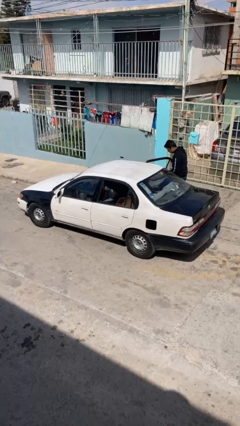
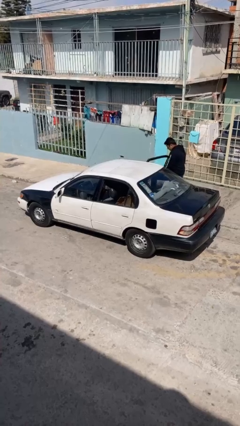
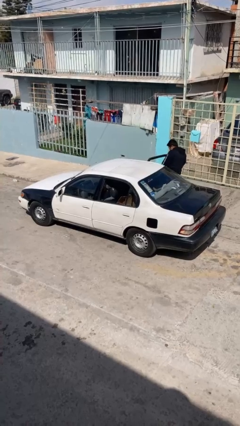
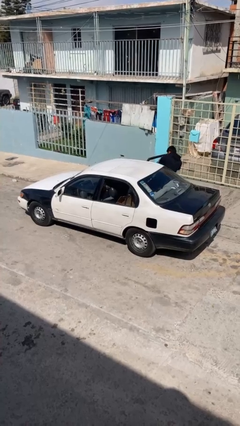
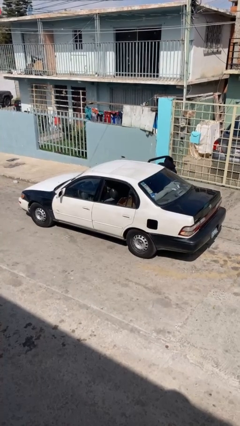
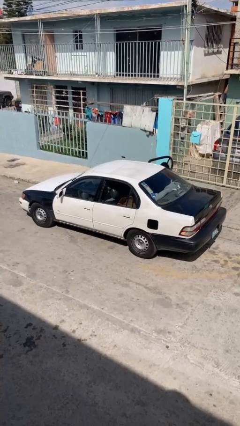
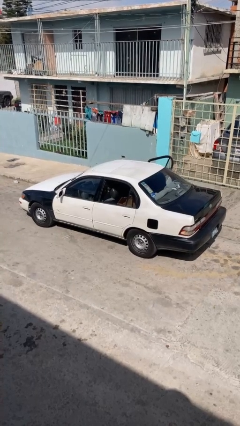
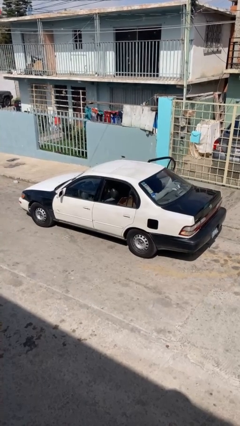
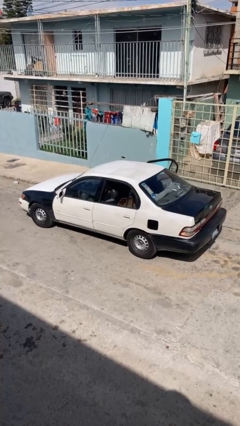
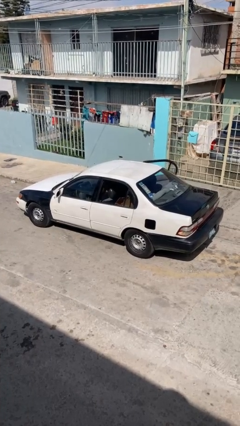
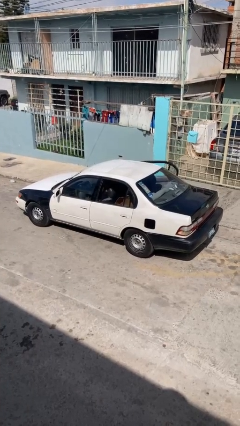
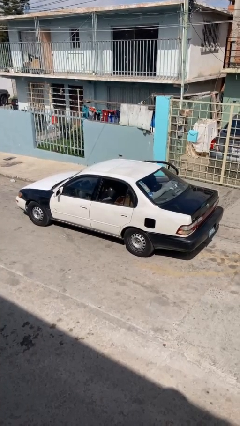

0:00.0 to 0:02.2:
car picks up person

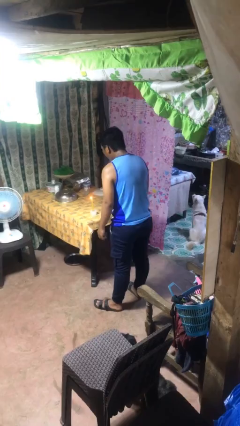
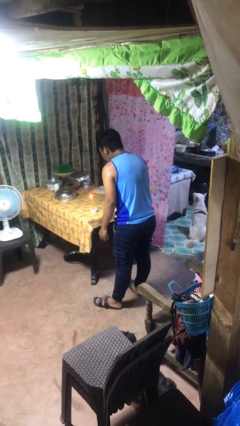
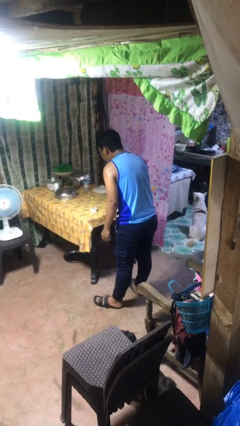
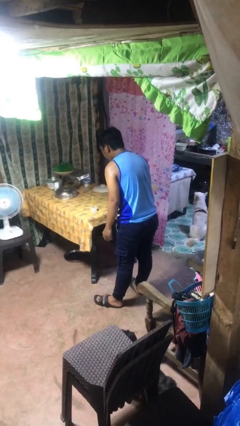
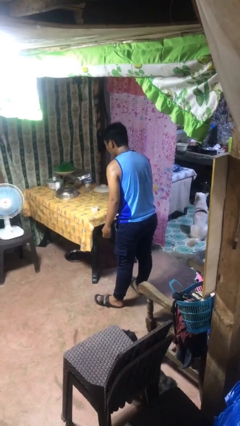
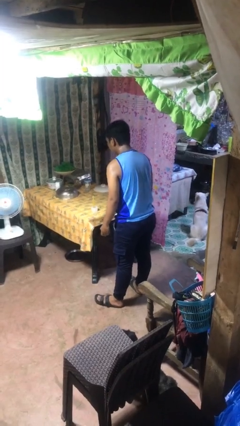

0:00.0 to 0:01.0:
person extinguishes candle

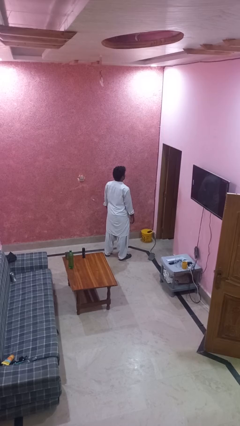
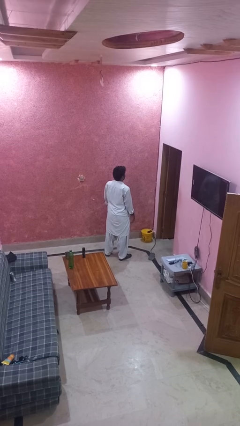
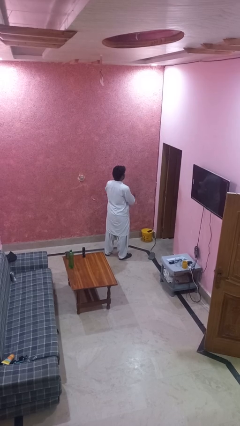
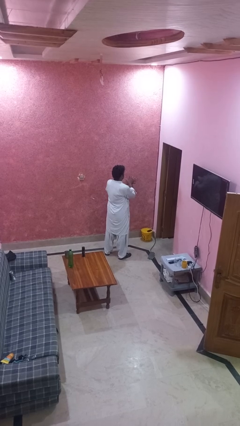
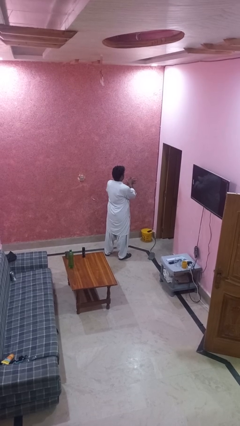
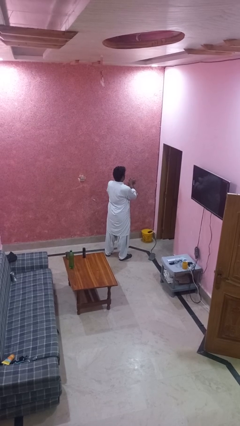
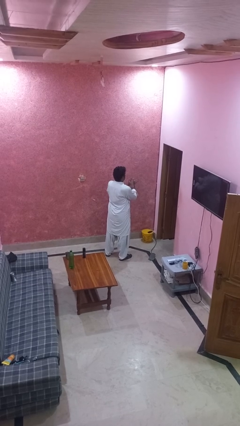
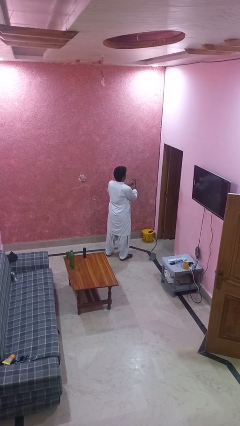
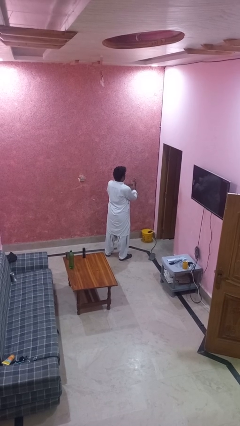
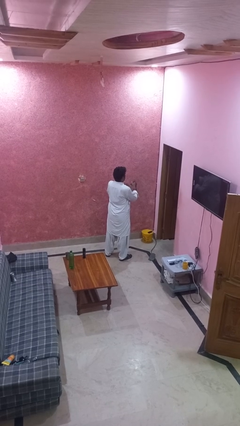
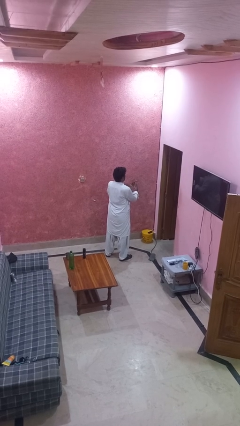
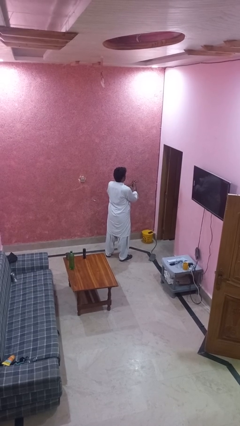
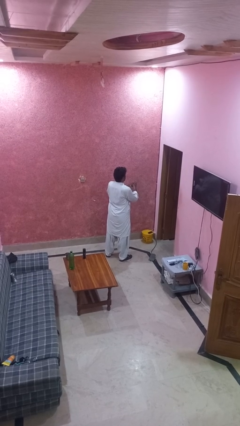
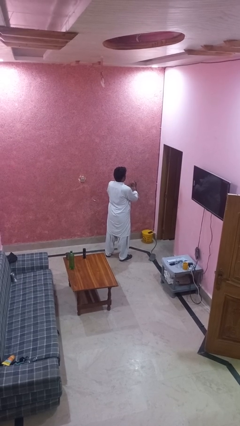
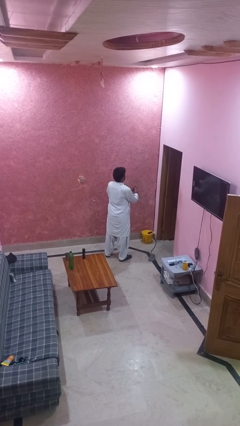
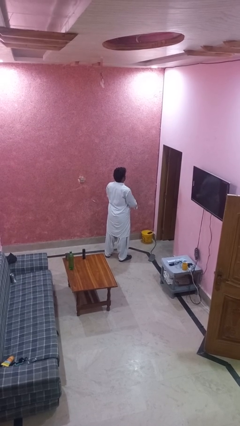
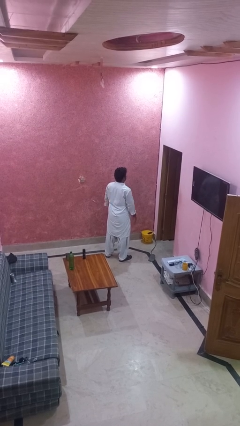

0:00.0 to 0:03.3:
person snaps fingers

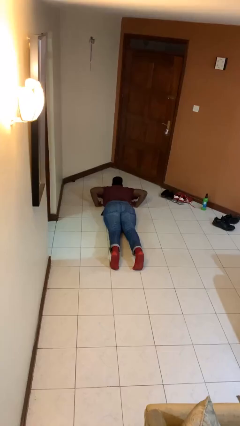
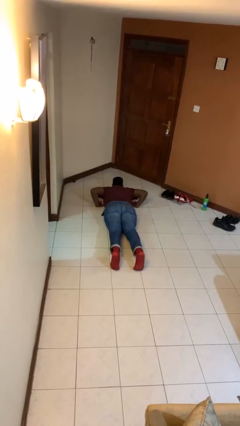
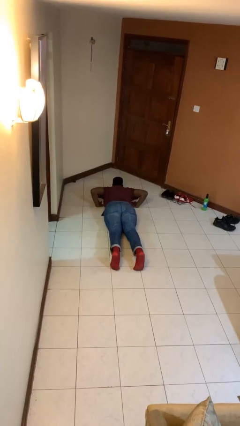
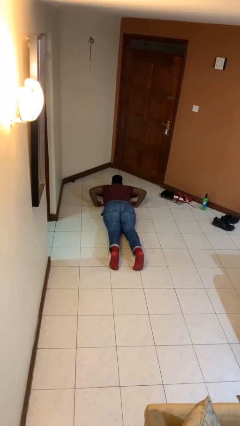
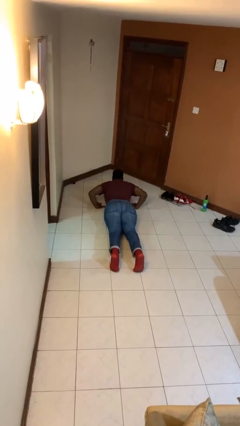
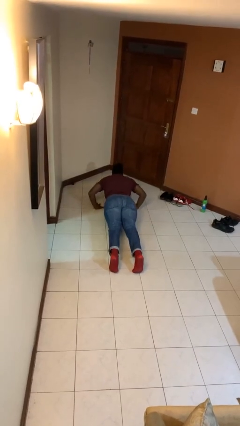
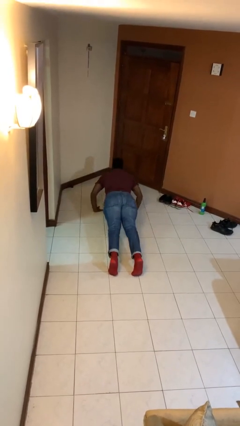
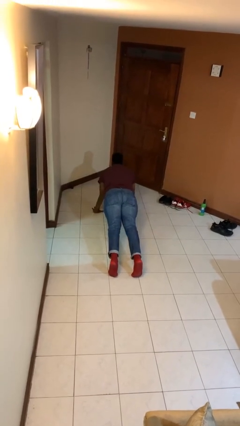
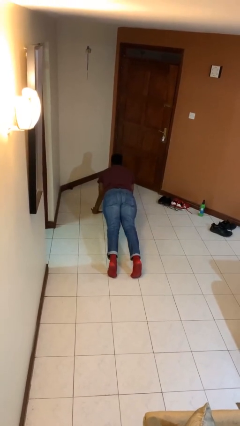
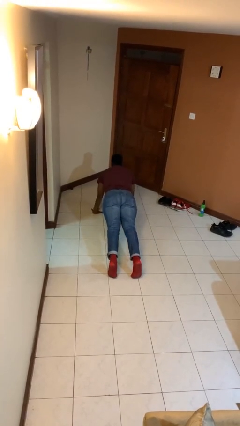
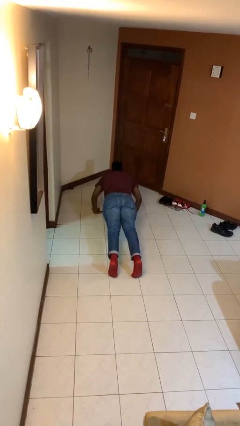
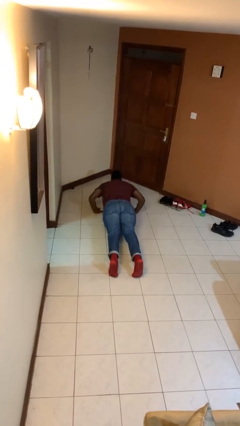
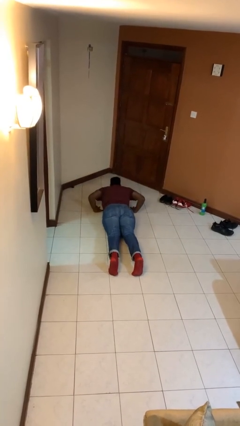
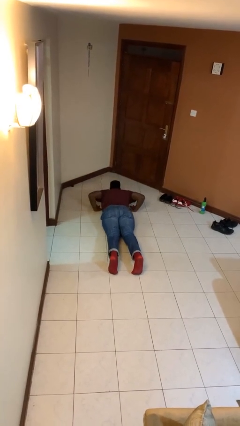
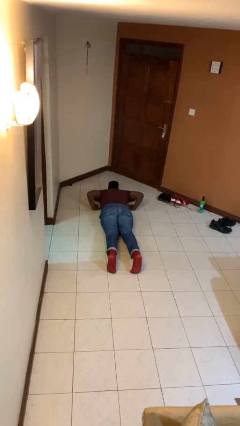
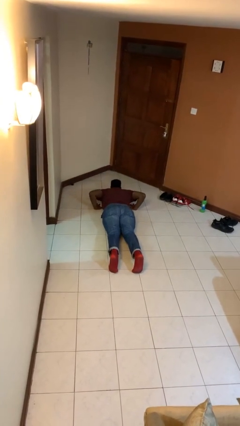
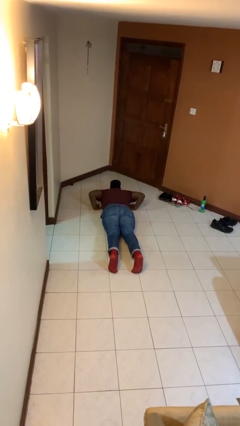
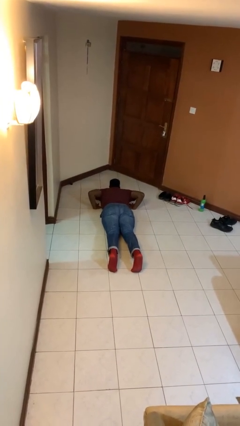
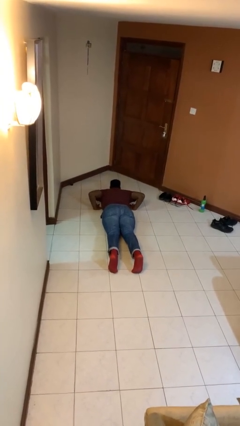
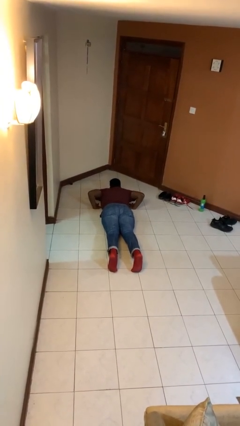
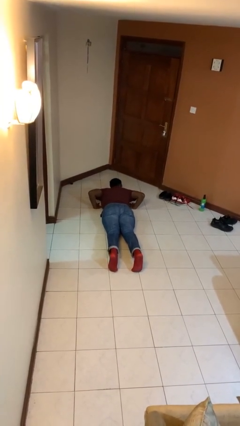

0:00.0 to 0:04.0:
person exercises with pushup

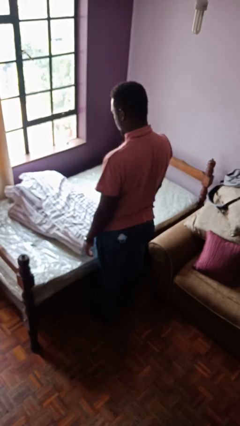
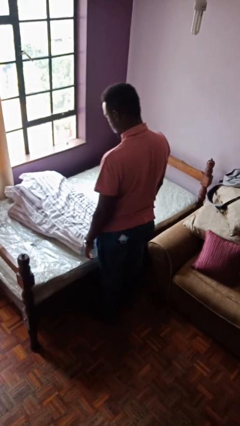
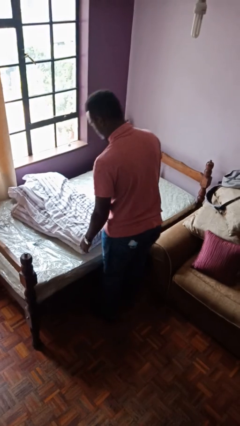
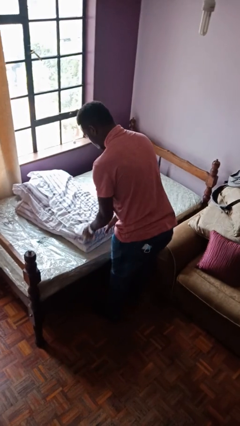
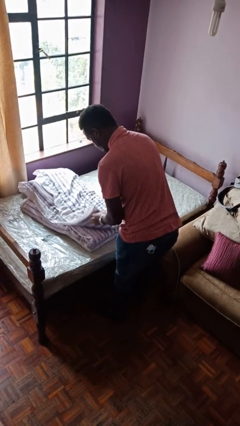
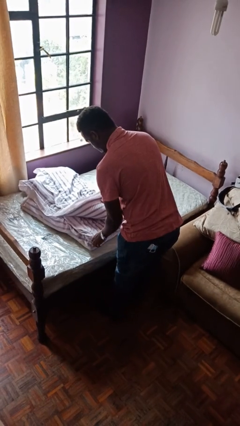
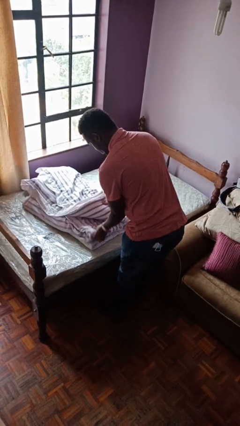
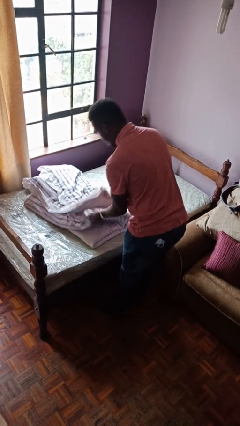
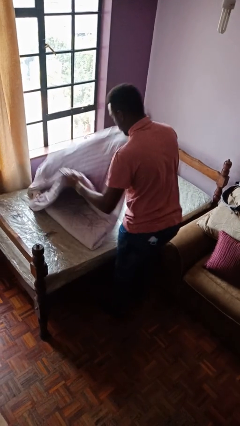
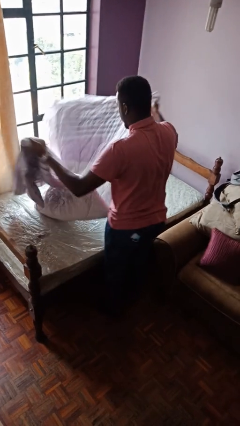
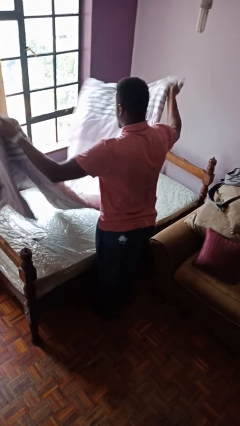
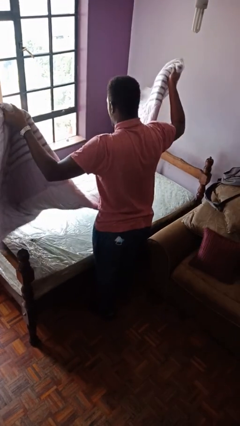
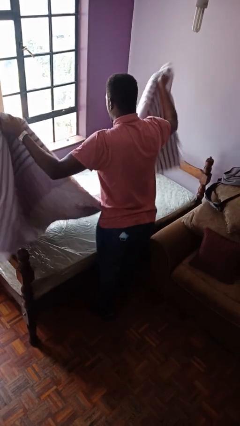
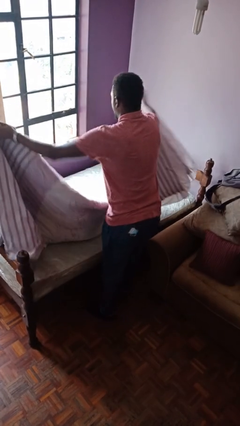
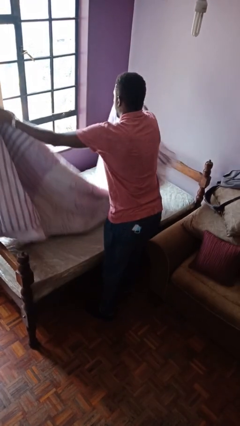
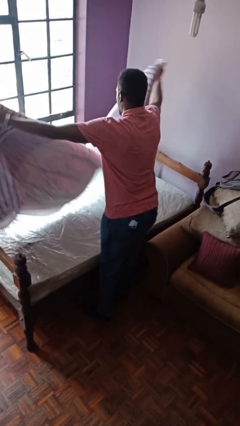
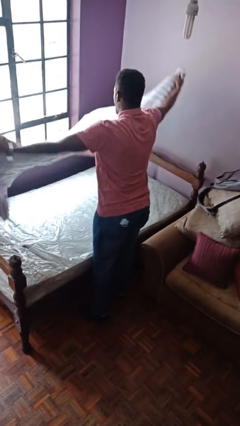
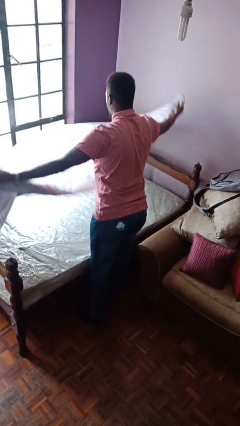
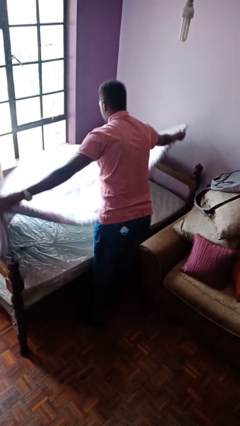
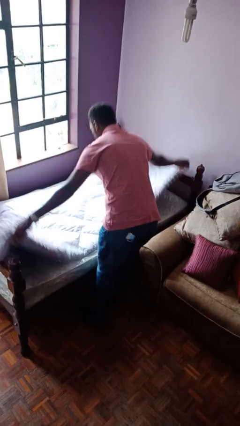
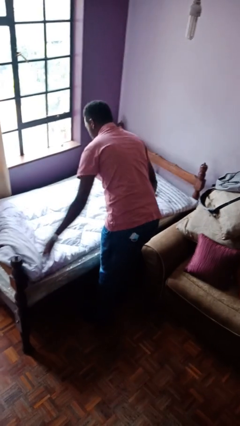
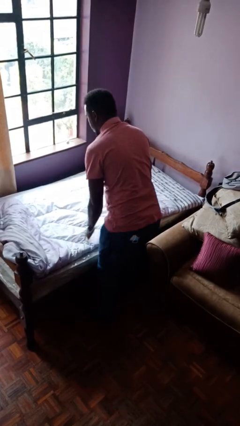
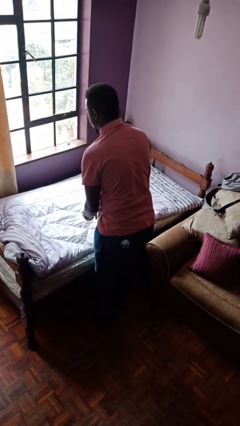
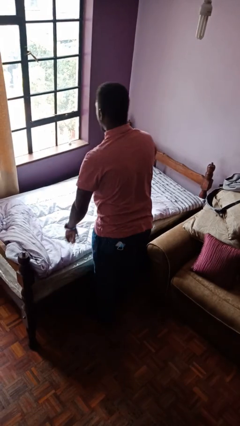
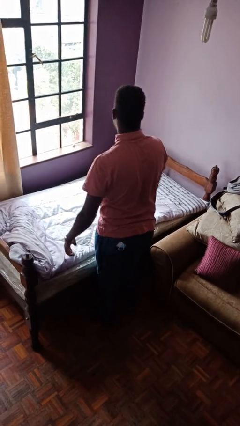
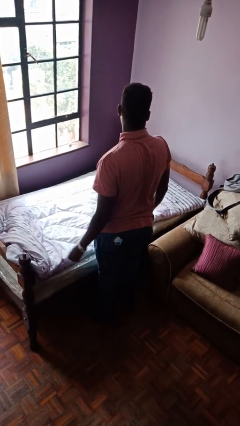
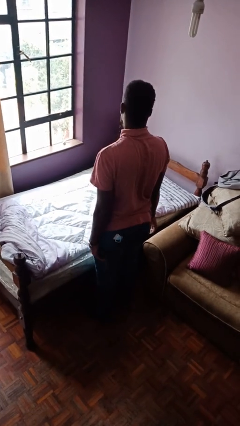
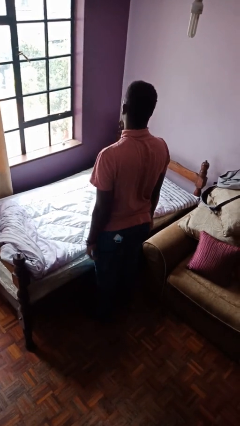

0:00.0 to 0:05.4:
person unfolds blanket

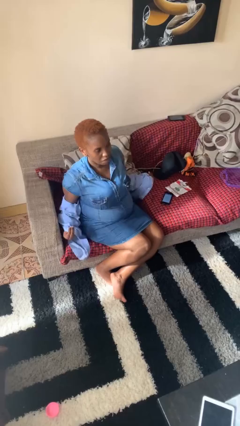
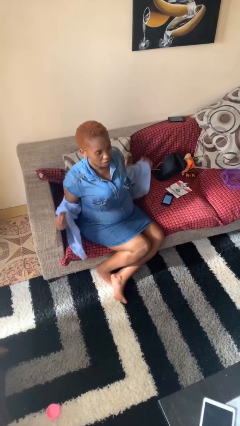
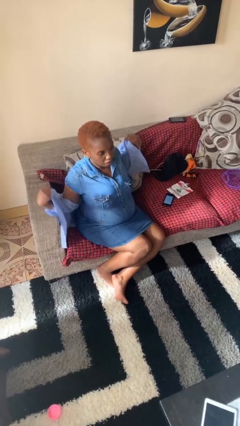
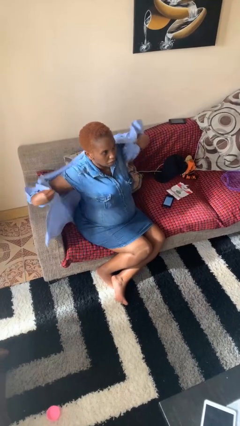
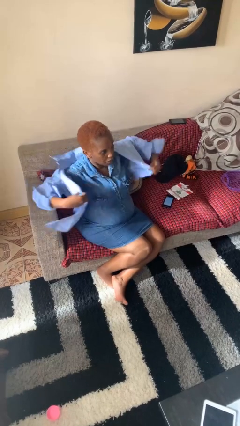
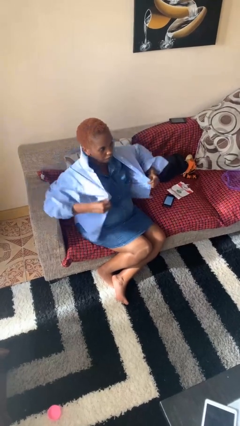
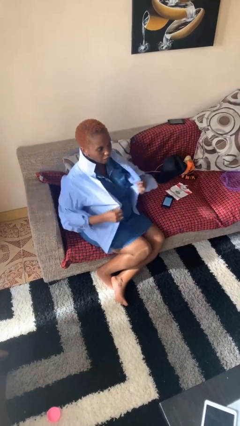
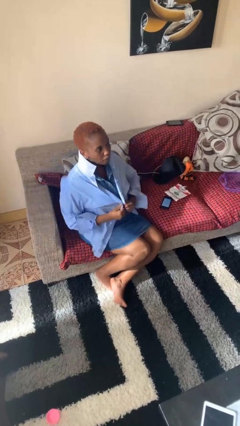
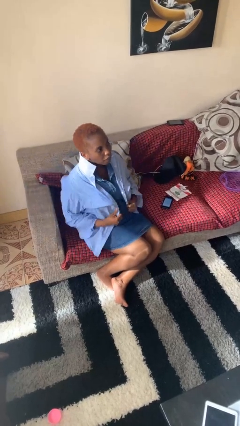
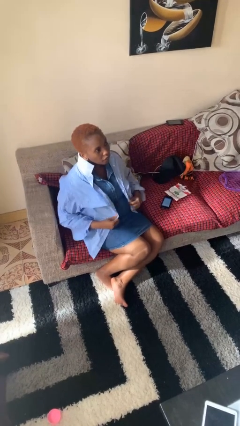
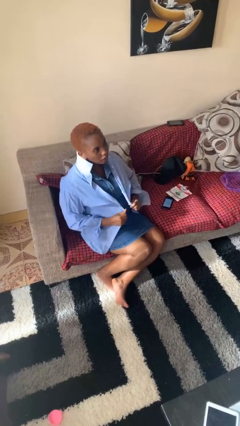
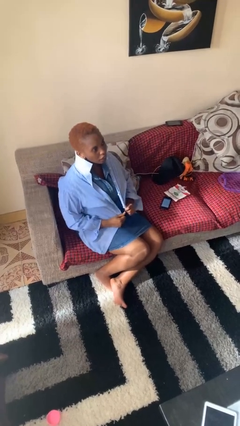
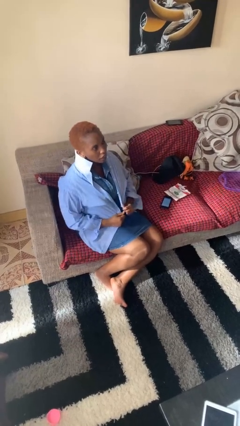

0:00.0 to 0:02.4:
person puts on shirt
